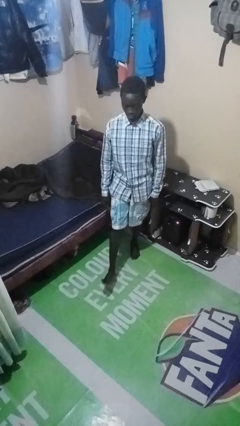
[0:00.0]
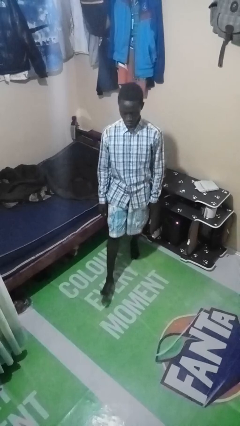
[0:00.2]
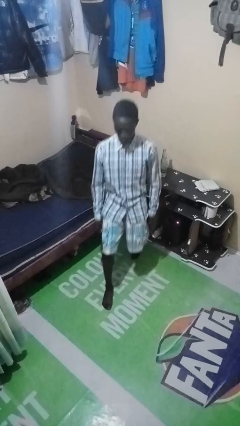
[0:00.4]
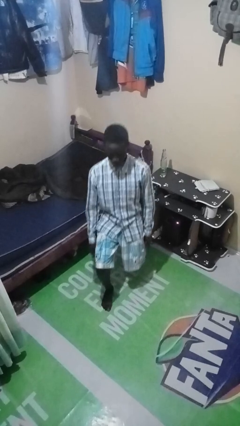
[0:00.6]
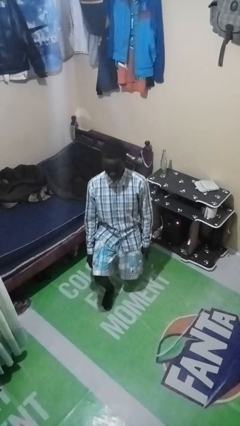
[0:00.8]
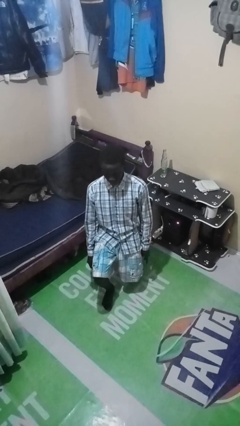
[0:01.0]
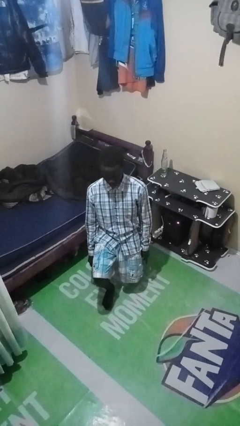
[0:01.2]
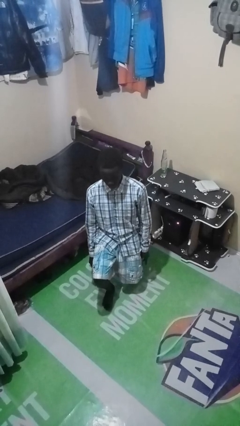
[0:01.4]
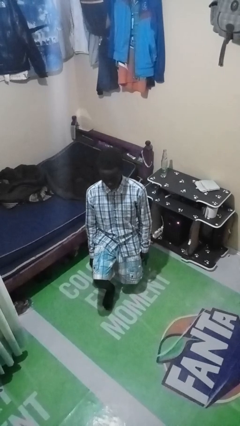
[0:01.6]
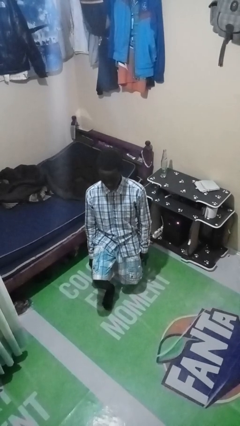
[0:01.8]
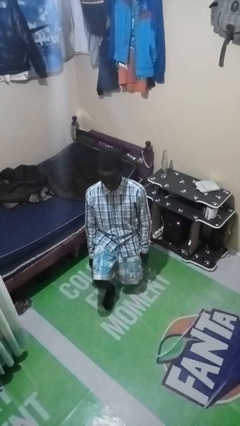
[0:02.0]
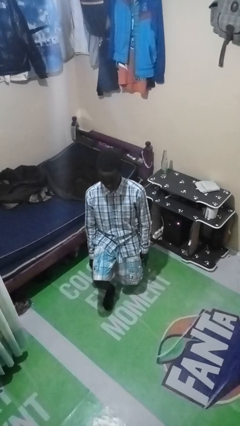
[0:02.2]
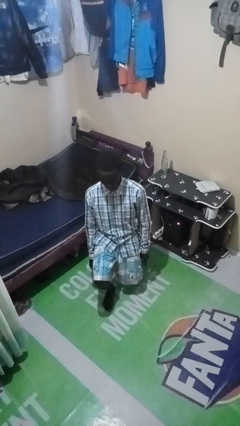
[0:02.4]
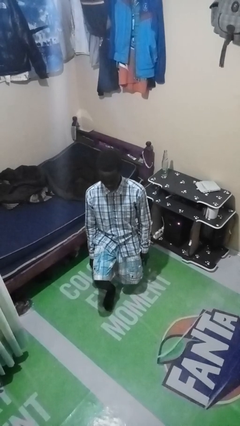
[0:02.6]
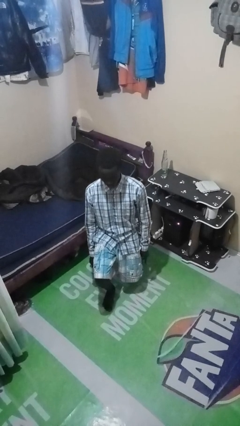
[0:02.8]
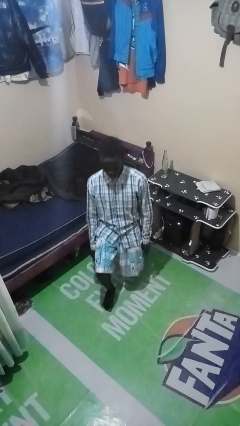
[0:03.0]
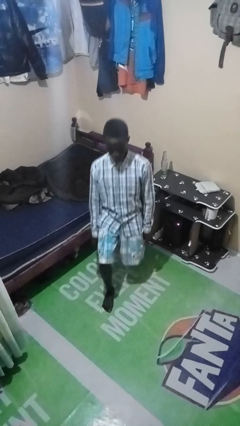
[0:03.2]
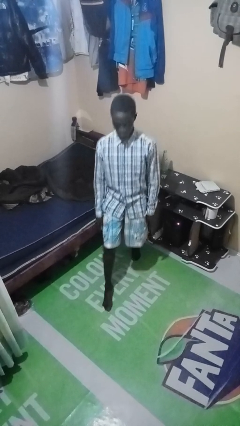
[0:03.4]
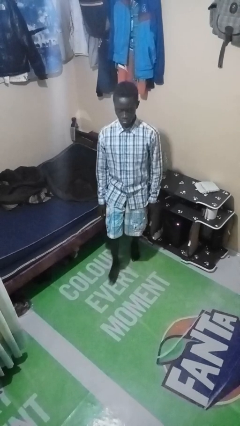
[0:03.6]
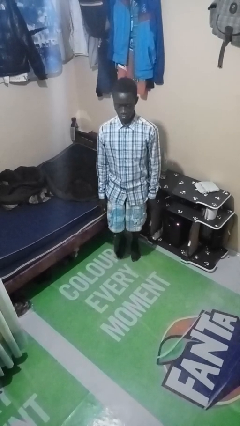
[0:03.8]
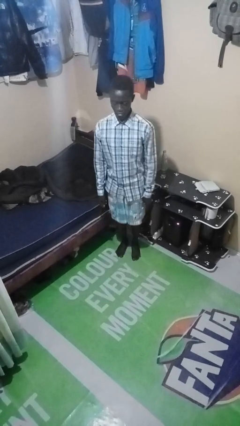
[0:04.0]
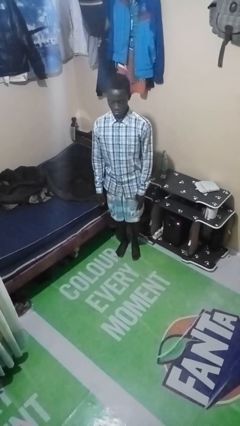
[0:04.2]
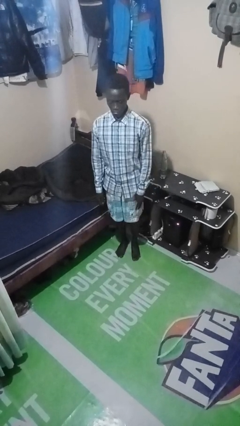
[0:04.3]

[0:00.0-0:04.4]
person exercises with lunges

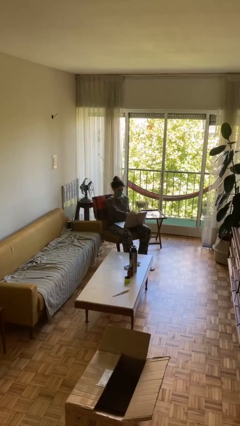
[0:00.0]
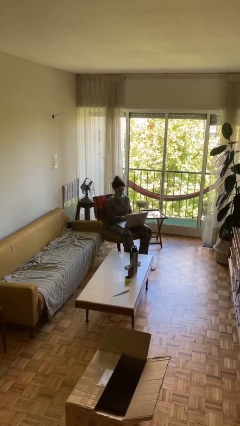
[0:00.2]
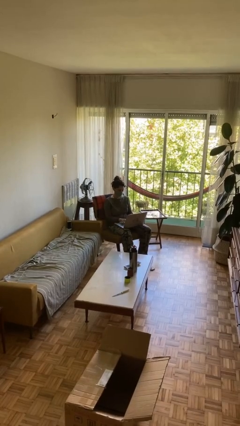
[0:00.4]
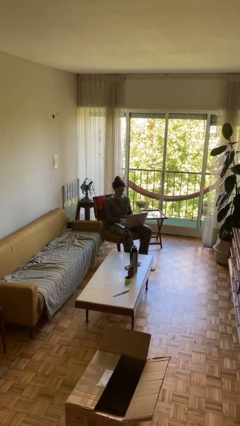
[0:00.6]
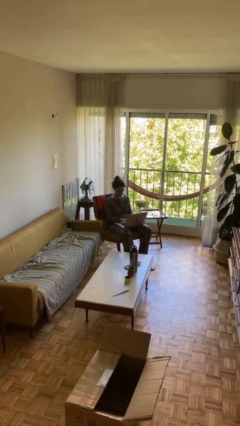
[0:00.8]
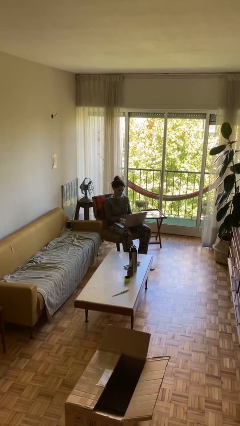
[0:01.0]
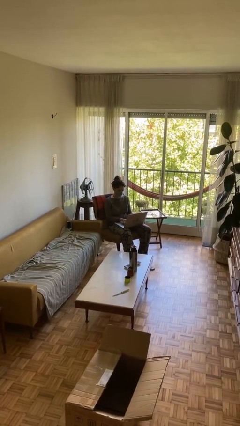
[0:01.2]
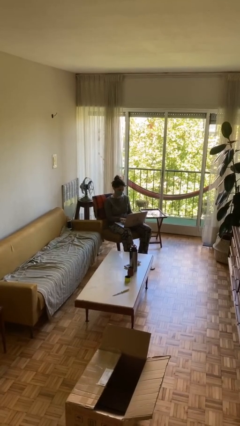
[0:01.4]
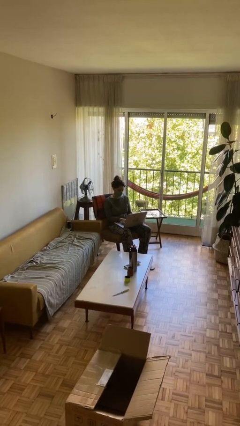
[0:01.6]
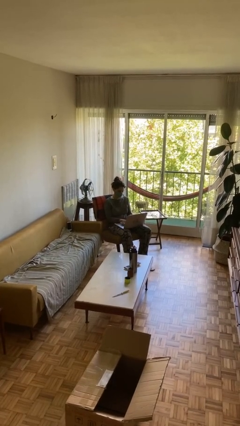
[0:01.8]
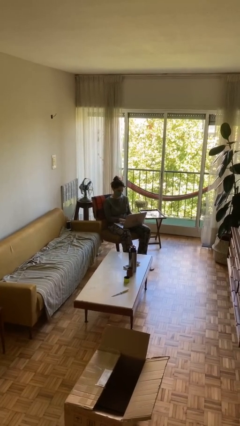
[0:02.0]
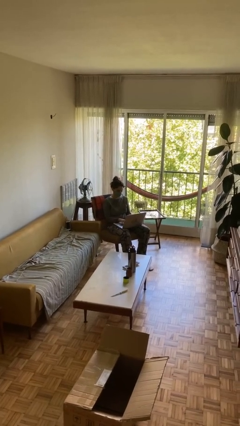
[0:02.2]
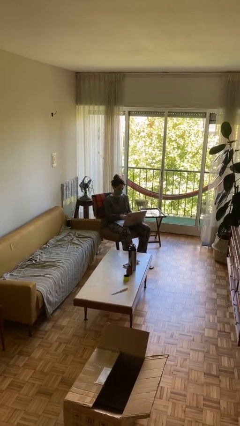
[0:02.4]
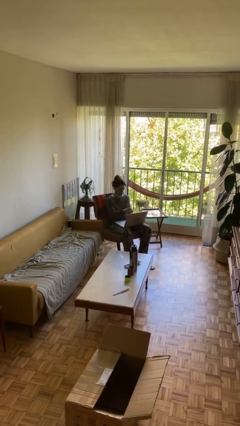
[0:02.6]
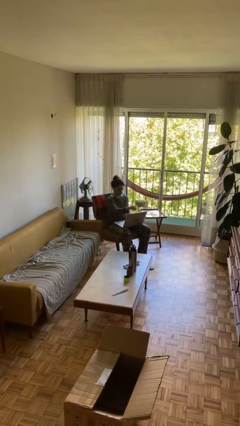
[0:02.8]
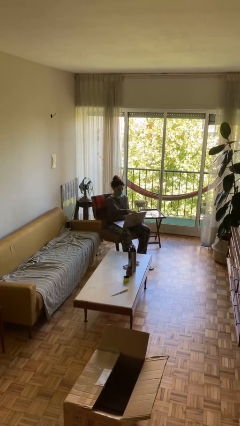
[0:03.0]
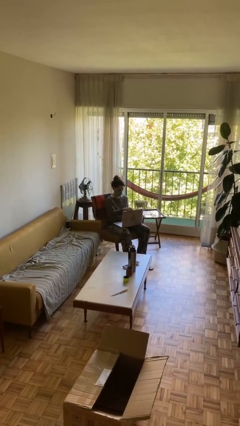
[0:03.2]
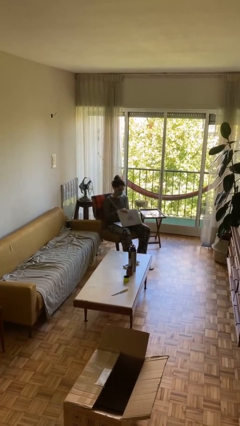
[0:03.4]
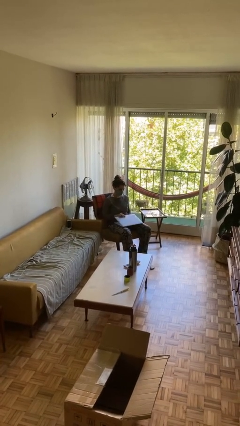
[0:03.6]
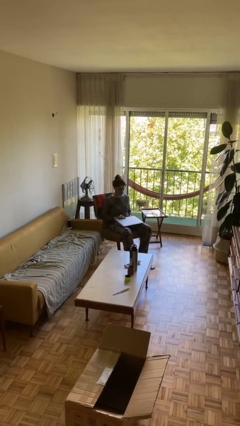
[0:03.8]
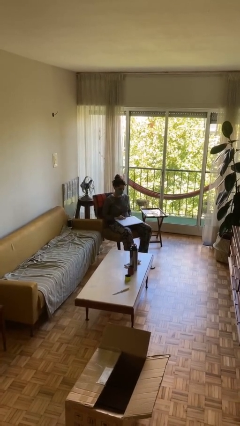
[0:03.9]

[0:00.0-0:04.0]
person interacts with laptop

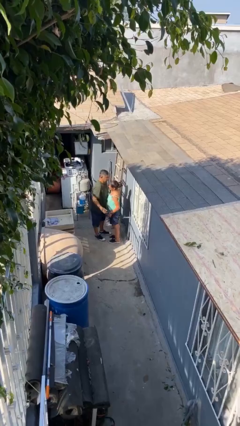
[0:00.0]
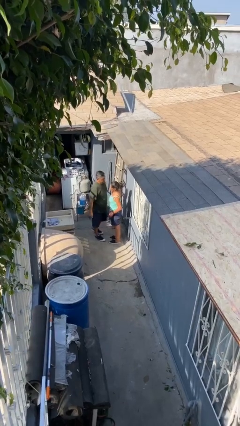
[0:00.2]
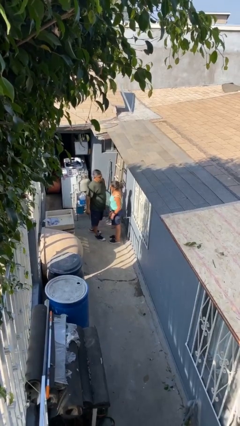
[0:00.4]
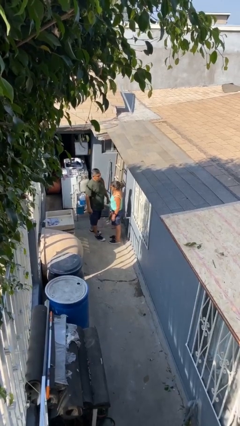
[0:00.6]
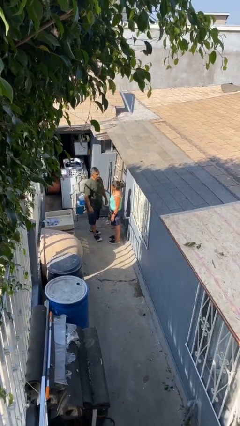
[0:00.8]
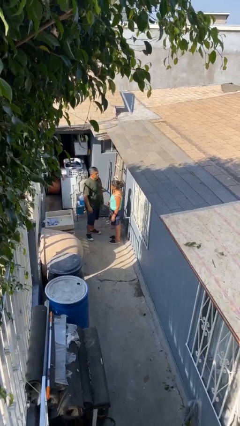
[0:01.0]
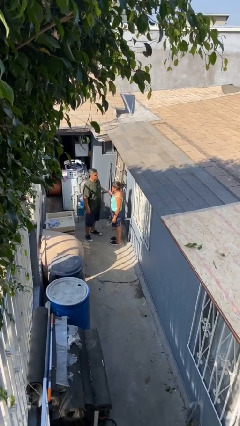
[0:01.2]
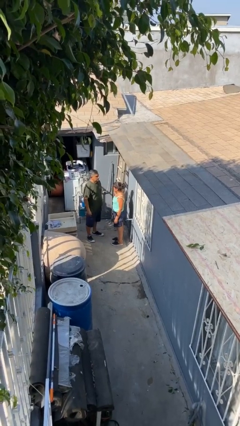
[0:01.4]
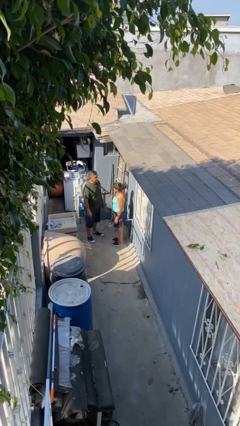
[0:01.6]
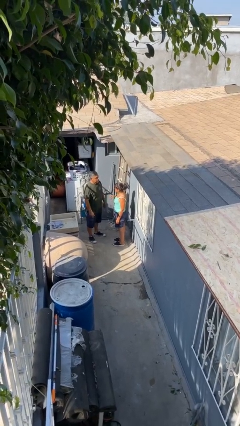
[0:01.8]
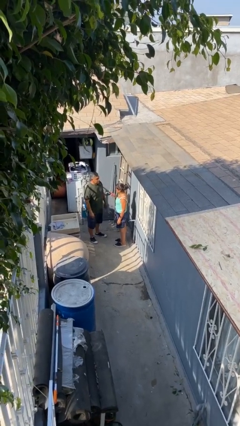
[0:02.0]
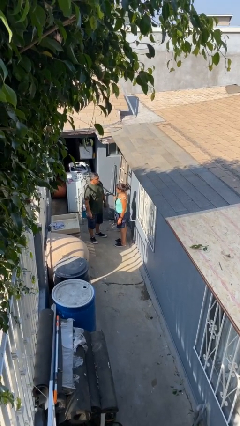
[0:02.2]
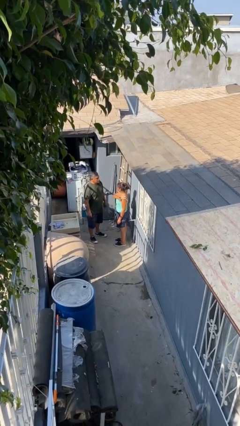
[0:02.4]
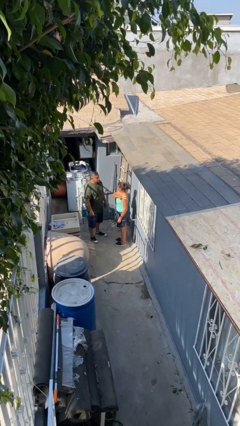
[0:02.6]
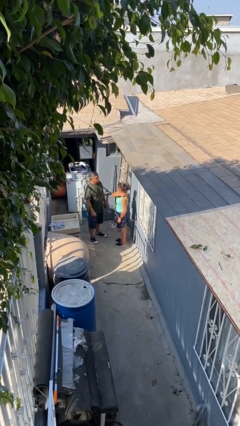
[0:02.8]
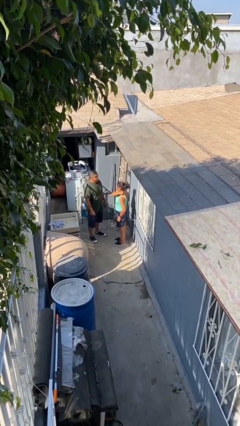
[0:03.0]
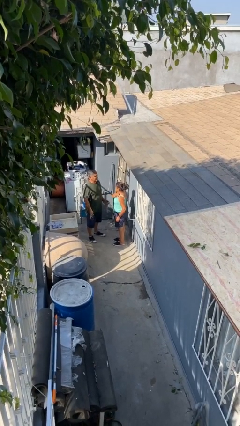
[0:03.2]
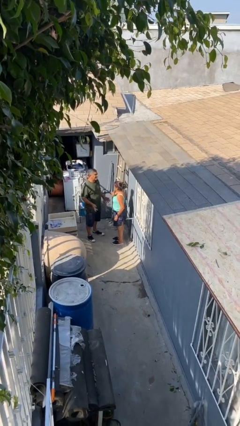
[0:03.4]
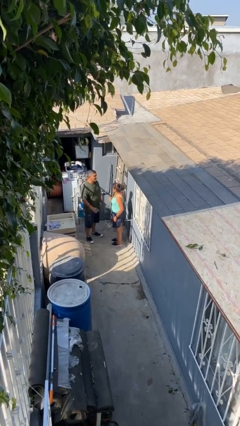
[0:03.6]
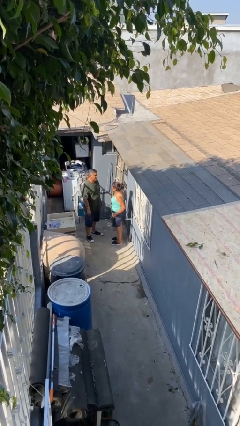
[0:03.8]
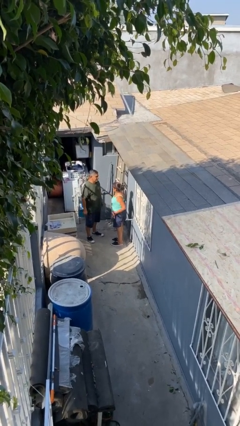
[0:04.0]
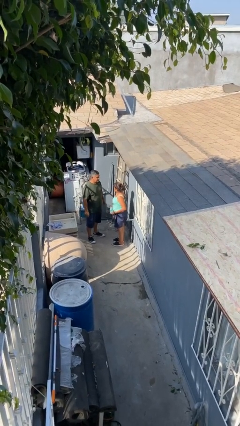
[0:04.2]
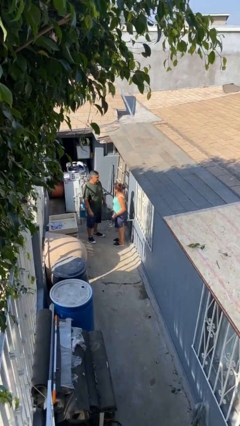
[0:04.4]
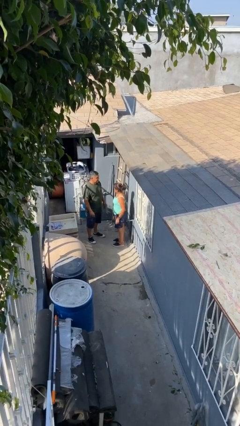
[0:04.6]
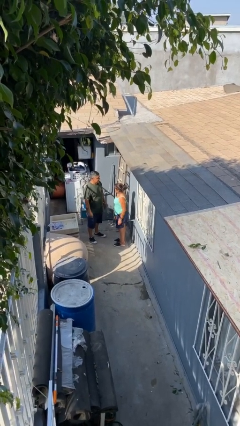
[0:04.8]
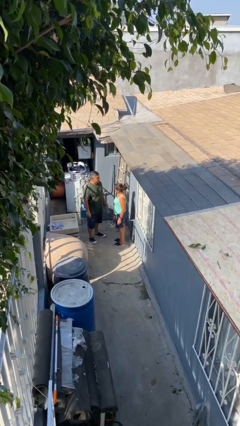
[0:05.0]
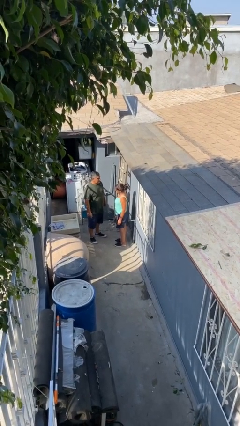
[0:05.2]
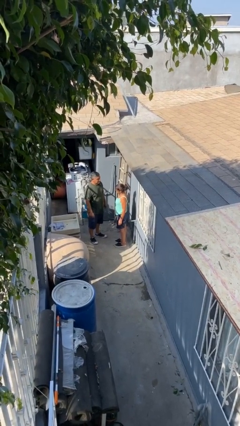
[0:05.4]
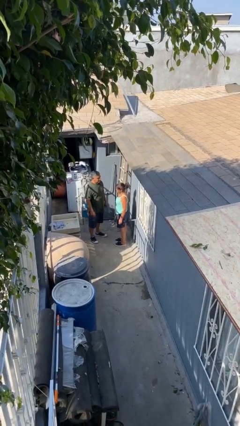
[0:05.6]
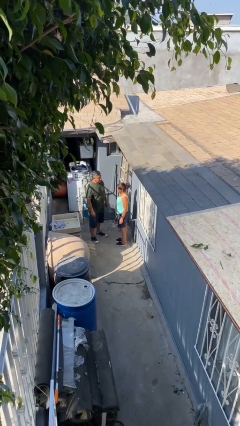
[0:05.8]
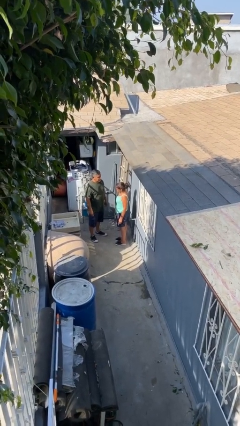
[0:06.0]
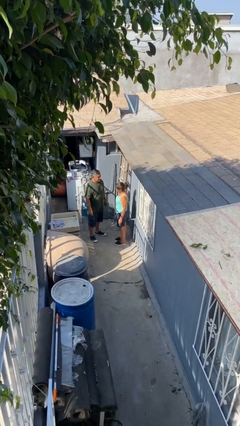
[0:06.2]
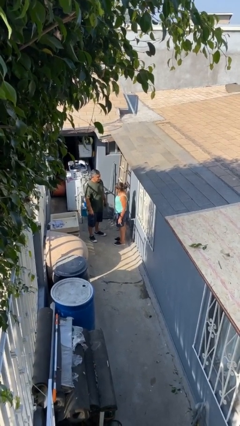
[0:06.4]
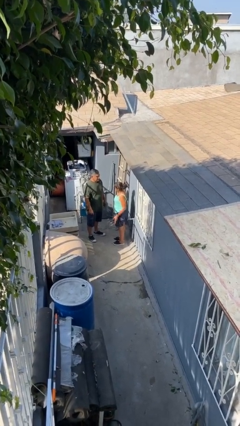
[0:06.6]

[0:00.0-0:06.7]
person talks to person

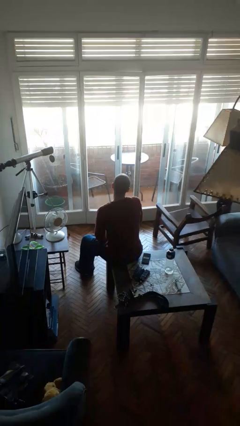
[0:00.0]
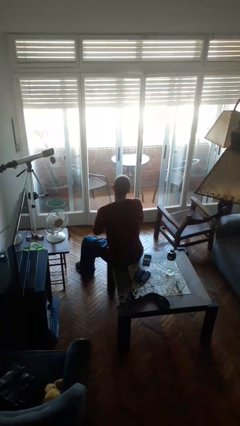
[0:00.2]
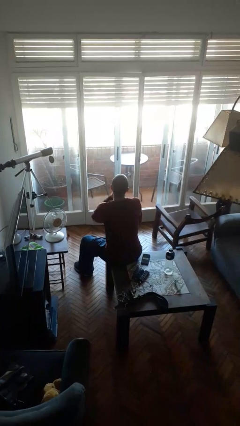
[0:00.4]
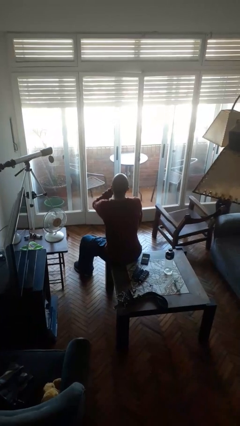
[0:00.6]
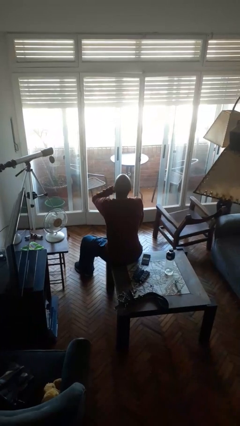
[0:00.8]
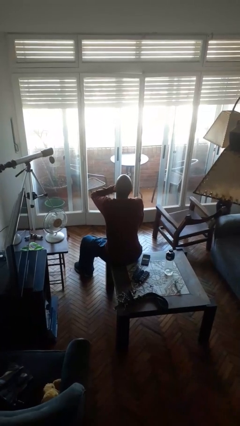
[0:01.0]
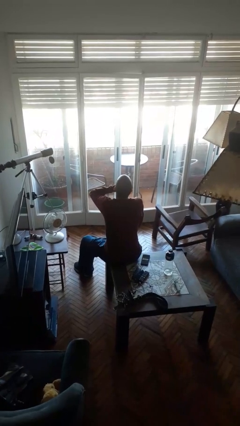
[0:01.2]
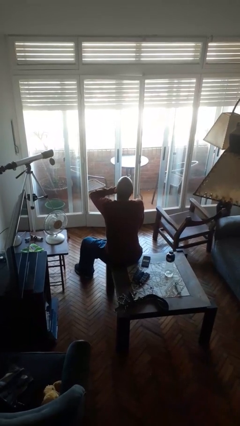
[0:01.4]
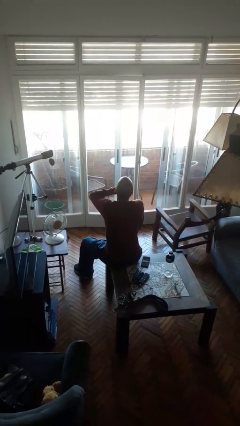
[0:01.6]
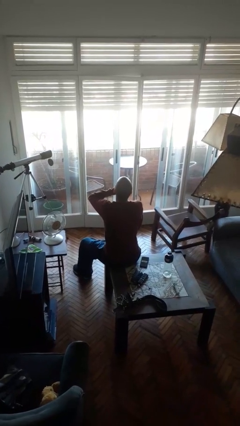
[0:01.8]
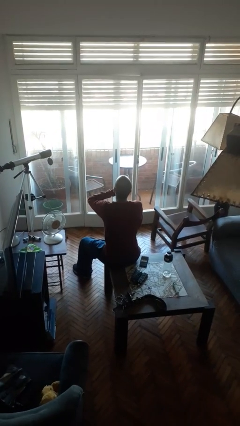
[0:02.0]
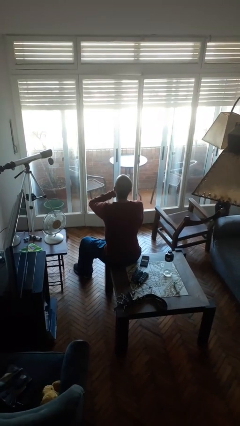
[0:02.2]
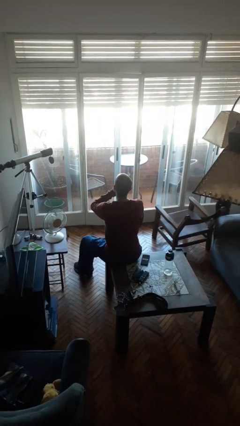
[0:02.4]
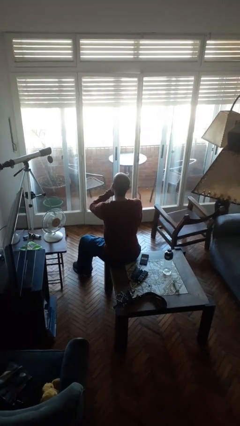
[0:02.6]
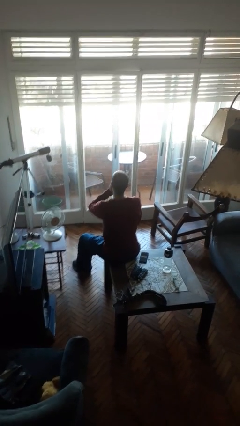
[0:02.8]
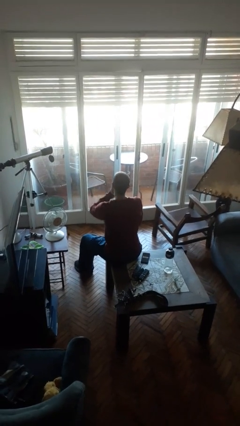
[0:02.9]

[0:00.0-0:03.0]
person yawns

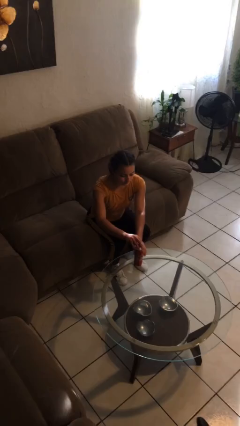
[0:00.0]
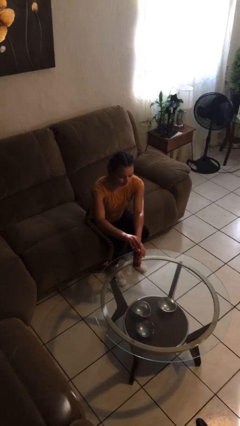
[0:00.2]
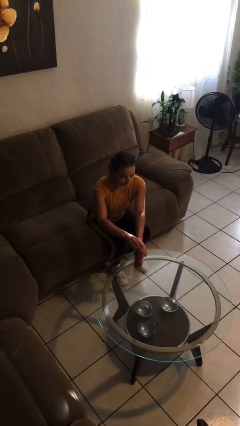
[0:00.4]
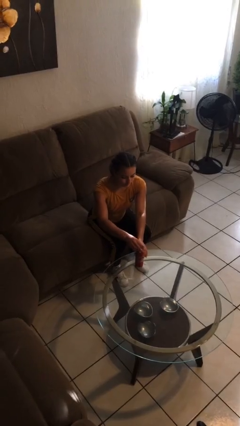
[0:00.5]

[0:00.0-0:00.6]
person opens beverage can
